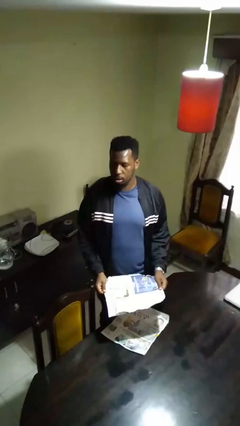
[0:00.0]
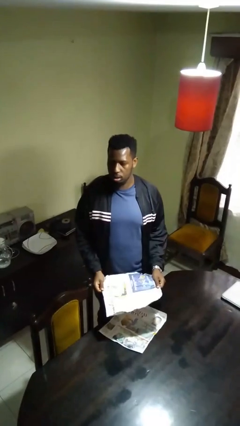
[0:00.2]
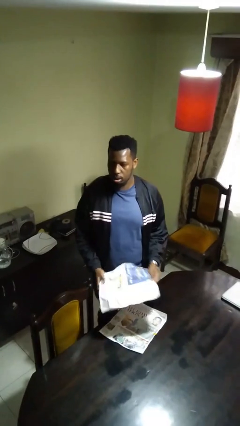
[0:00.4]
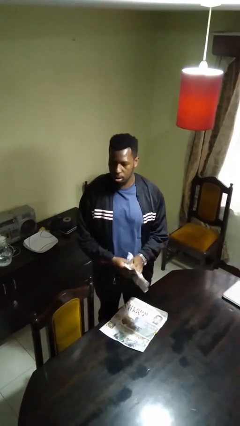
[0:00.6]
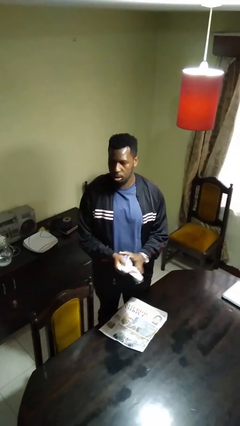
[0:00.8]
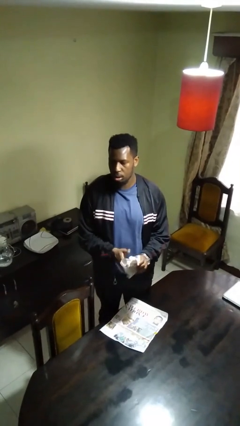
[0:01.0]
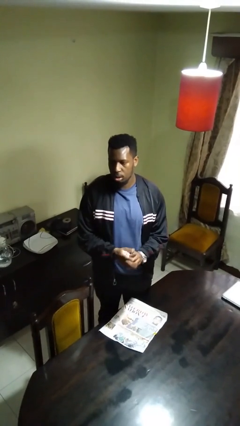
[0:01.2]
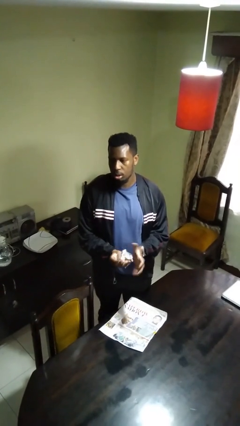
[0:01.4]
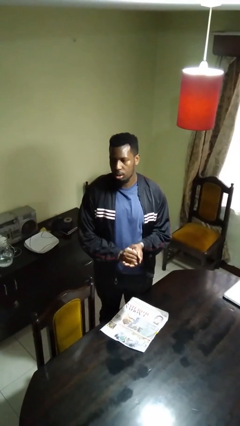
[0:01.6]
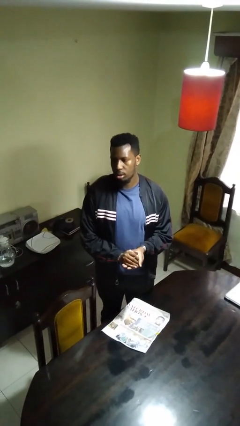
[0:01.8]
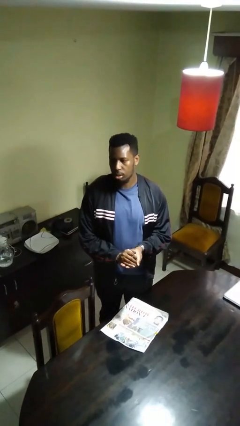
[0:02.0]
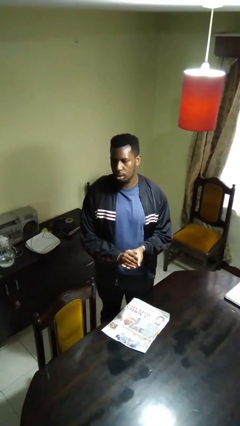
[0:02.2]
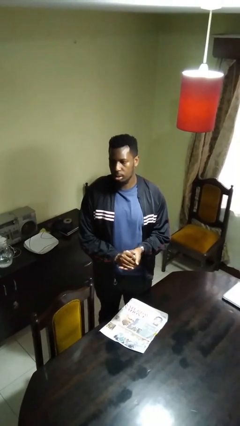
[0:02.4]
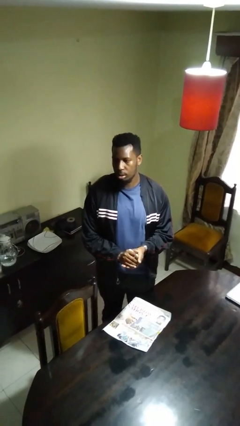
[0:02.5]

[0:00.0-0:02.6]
person crumples paper

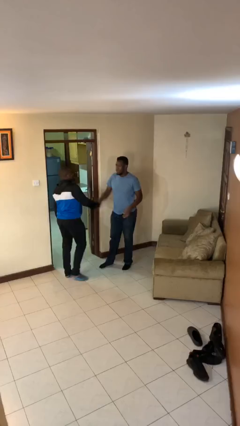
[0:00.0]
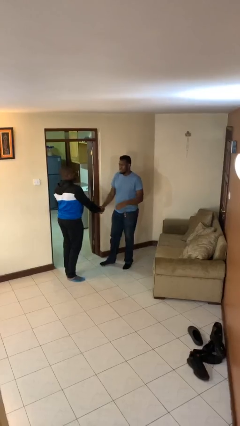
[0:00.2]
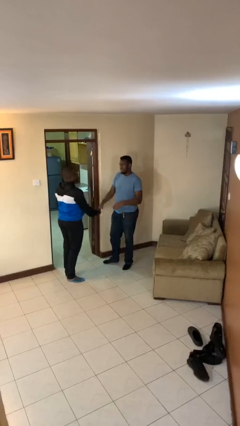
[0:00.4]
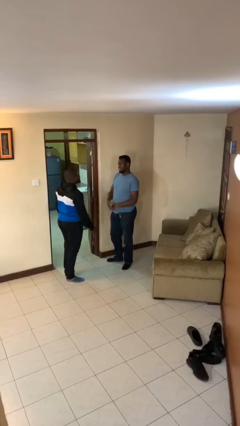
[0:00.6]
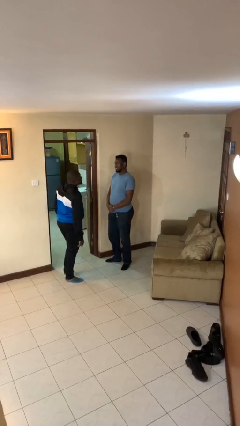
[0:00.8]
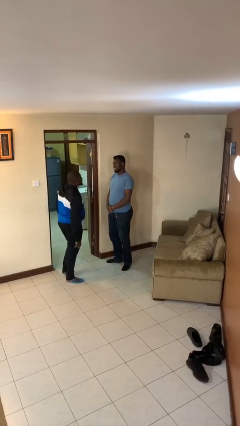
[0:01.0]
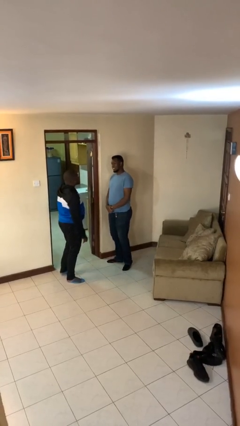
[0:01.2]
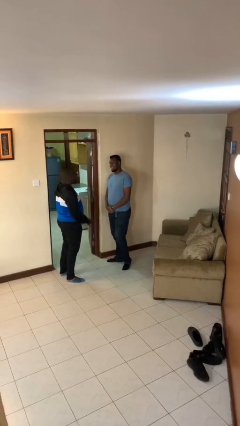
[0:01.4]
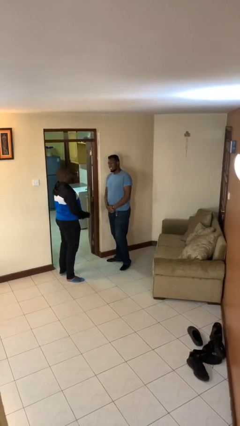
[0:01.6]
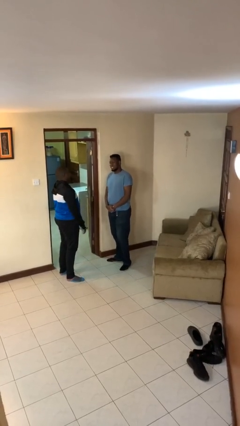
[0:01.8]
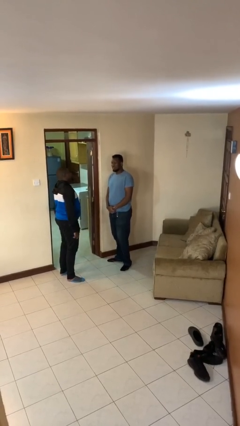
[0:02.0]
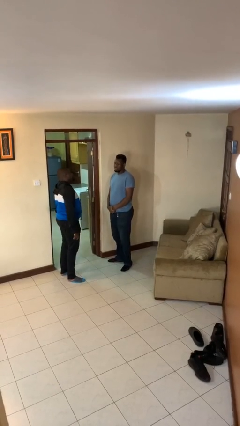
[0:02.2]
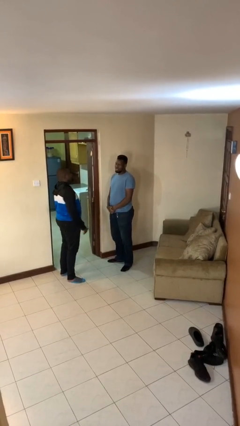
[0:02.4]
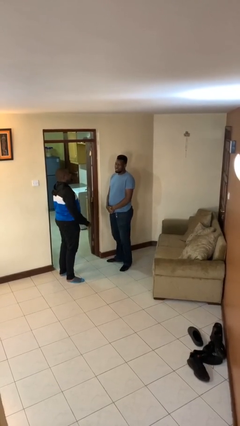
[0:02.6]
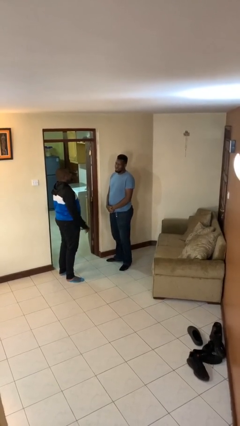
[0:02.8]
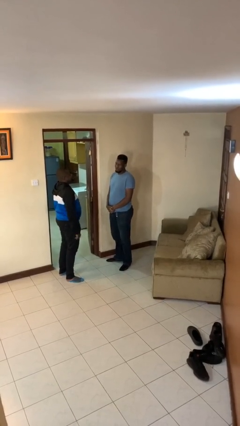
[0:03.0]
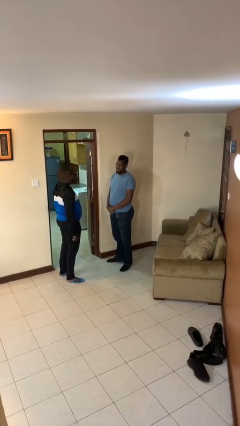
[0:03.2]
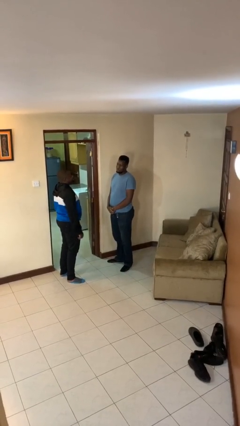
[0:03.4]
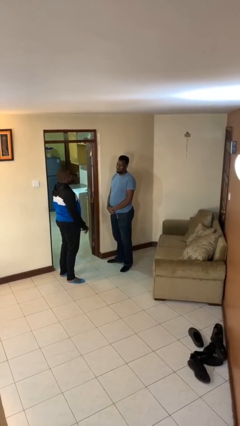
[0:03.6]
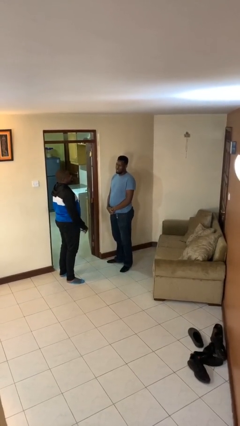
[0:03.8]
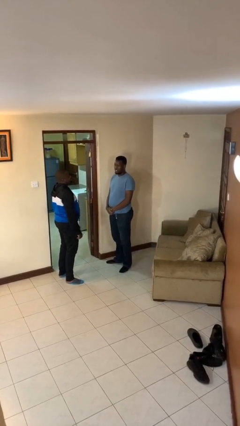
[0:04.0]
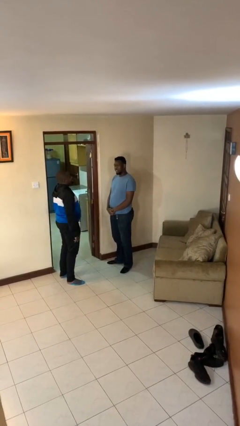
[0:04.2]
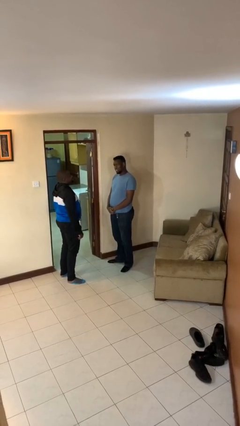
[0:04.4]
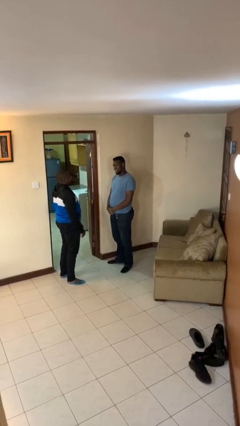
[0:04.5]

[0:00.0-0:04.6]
person talks to person

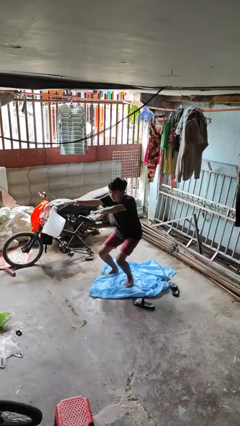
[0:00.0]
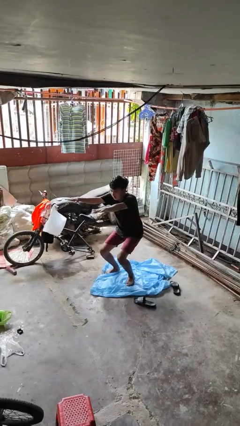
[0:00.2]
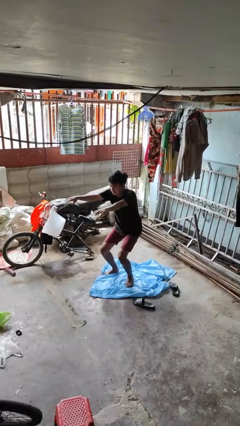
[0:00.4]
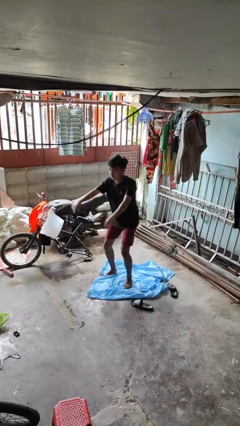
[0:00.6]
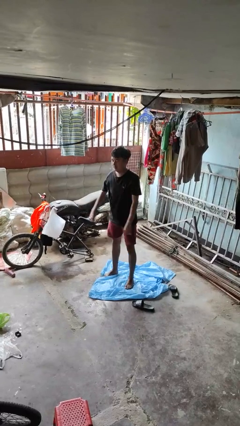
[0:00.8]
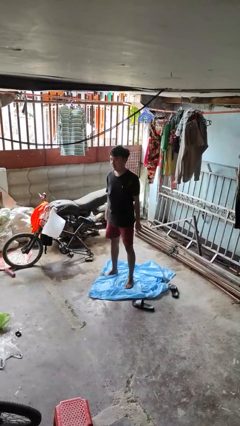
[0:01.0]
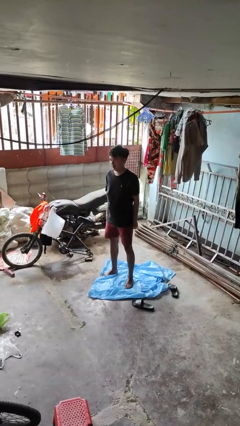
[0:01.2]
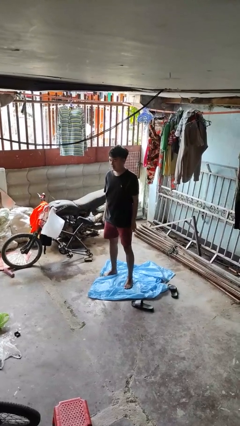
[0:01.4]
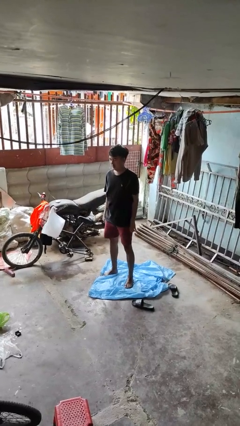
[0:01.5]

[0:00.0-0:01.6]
person stands up

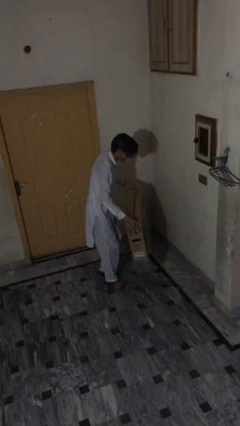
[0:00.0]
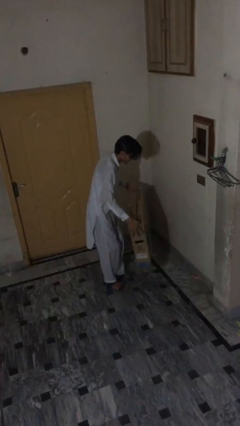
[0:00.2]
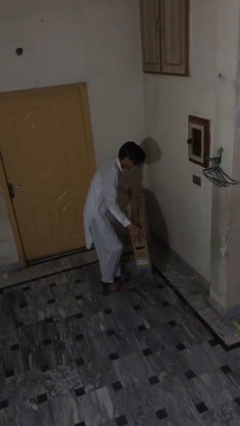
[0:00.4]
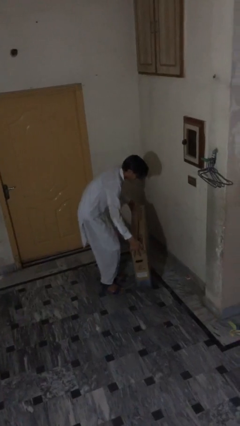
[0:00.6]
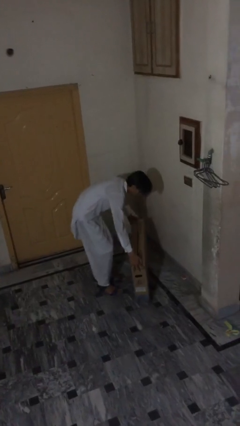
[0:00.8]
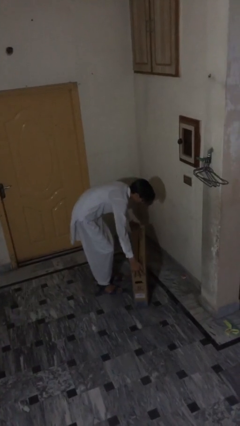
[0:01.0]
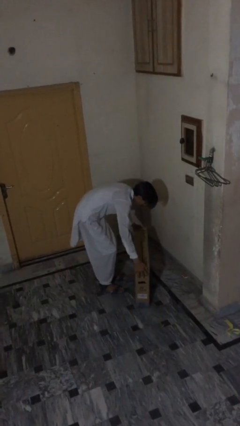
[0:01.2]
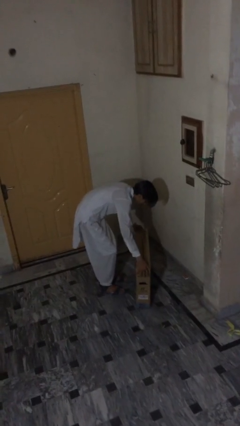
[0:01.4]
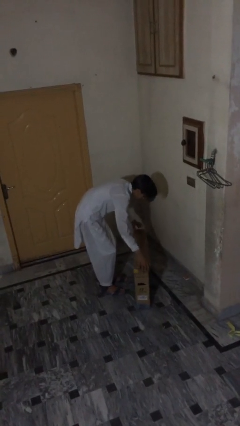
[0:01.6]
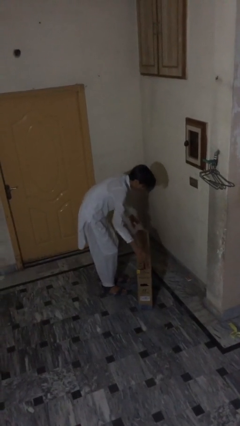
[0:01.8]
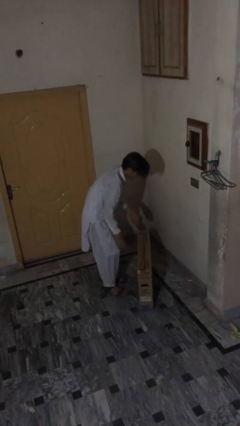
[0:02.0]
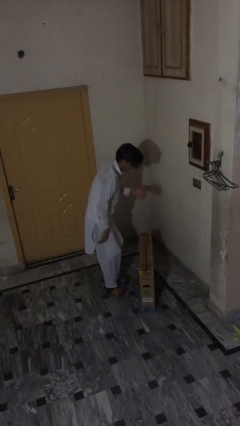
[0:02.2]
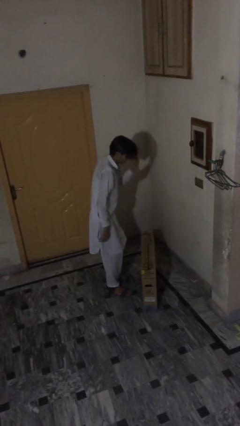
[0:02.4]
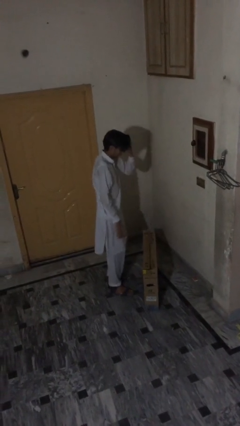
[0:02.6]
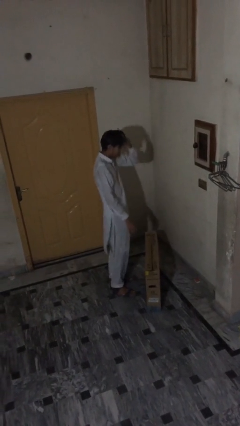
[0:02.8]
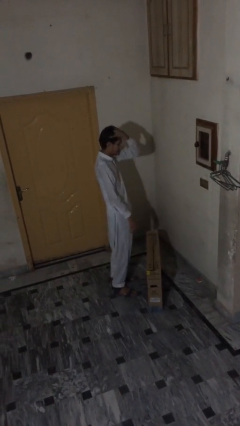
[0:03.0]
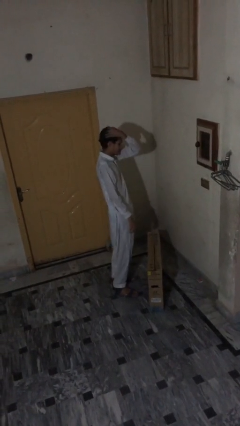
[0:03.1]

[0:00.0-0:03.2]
person puts down object on floor

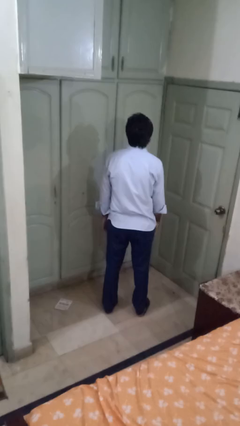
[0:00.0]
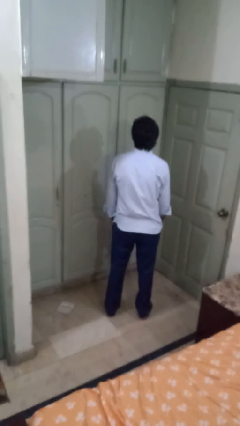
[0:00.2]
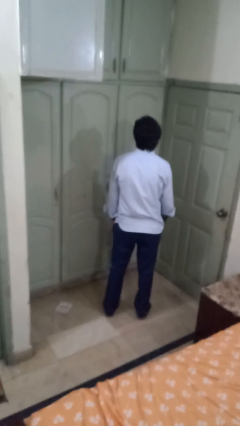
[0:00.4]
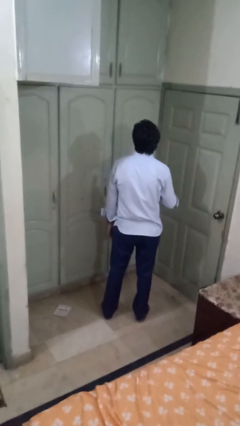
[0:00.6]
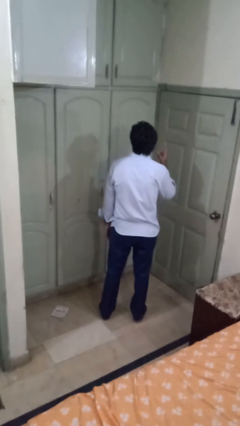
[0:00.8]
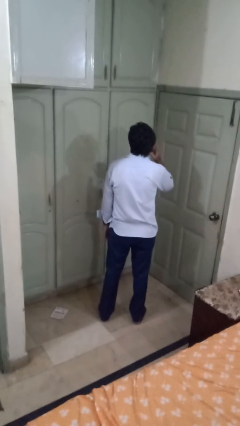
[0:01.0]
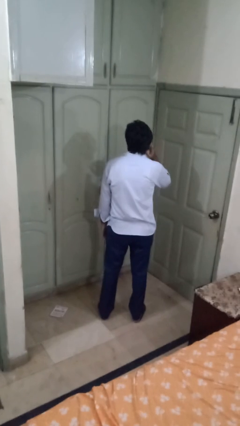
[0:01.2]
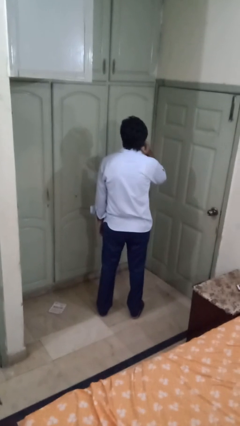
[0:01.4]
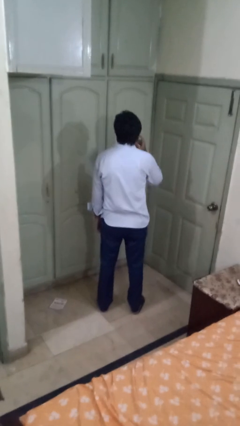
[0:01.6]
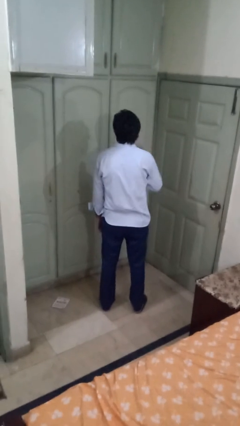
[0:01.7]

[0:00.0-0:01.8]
person gestures listen closely

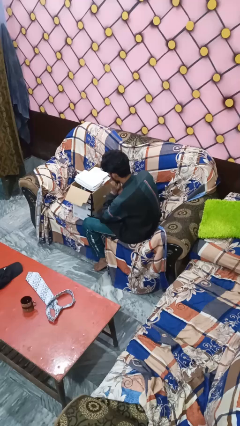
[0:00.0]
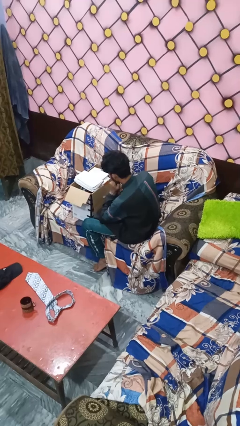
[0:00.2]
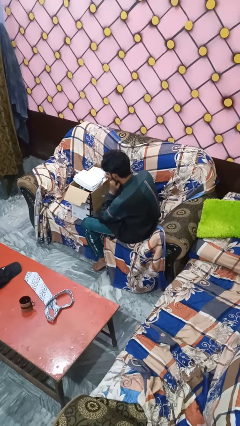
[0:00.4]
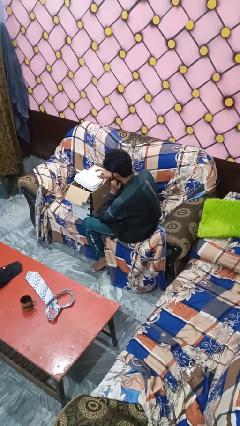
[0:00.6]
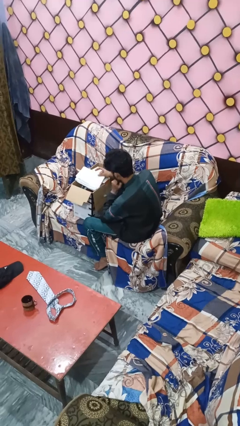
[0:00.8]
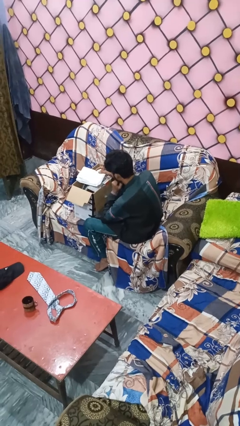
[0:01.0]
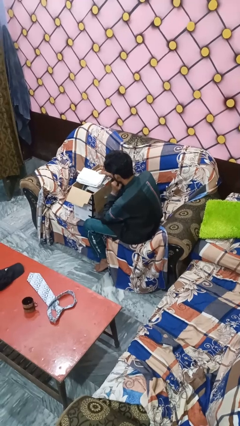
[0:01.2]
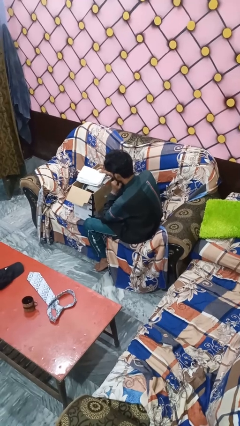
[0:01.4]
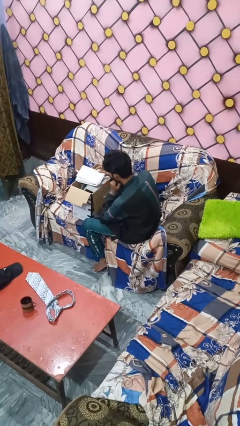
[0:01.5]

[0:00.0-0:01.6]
person wraps box

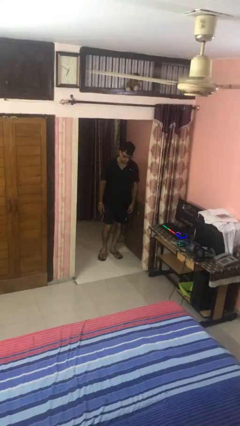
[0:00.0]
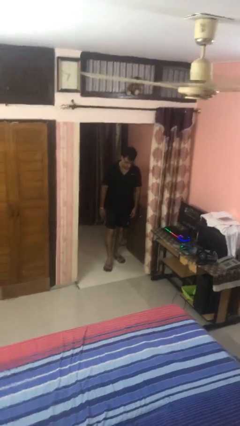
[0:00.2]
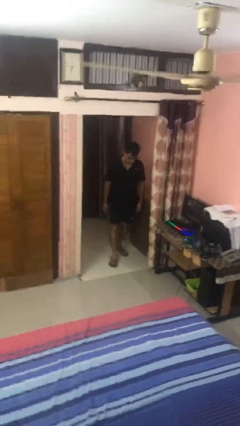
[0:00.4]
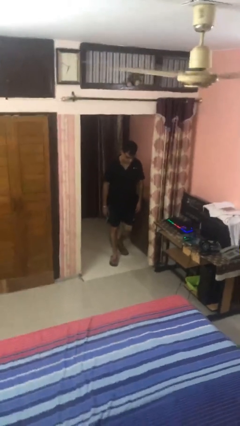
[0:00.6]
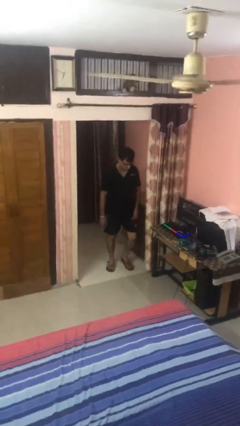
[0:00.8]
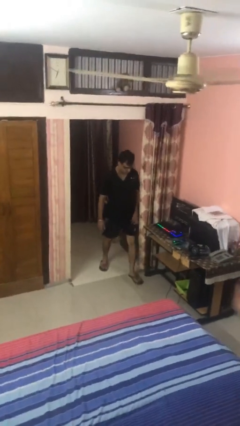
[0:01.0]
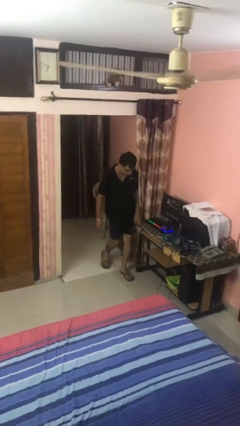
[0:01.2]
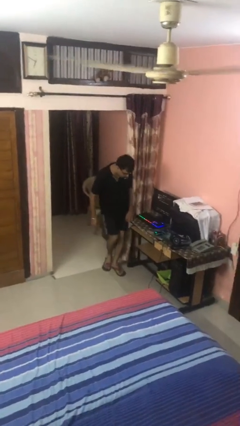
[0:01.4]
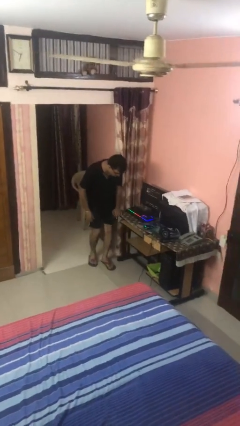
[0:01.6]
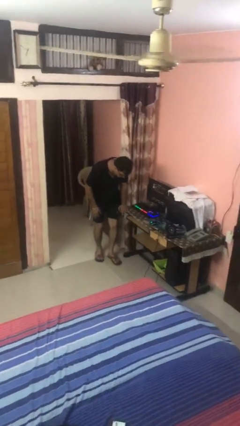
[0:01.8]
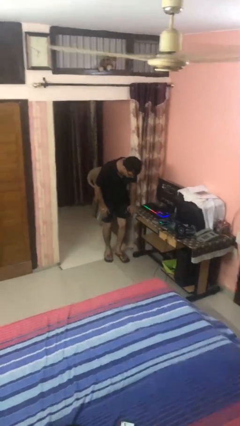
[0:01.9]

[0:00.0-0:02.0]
person bumps into table
